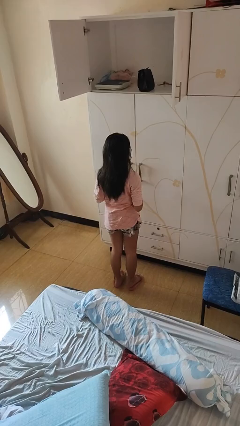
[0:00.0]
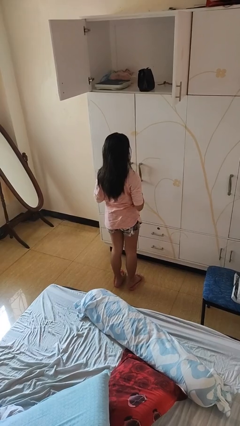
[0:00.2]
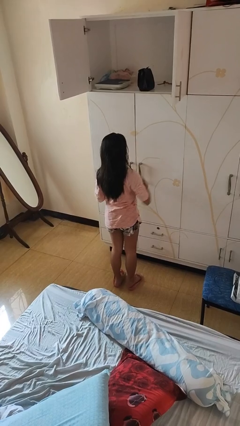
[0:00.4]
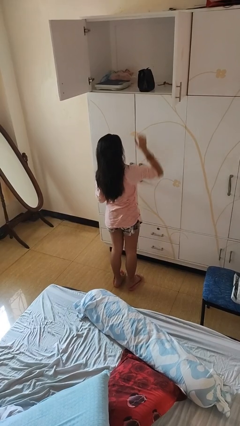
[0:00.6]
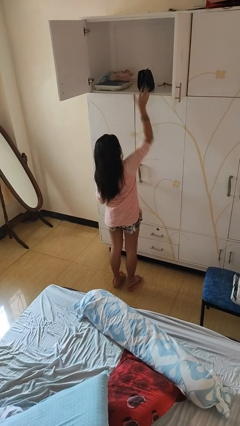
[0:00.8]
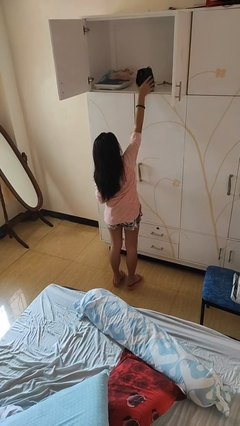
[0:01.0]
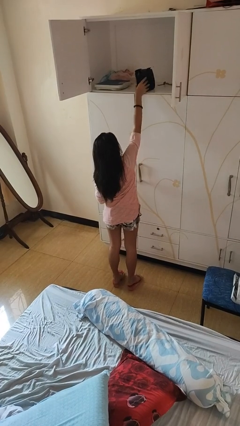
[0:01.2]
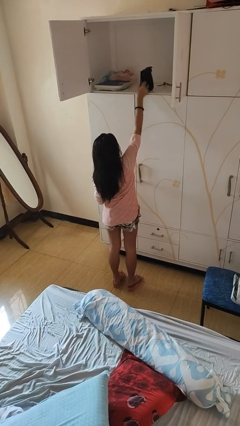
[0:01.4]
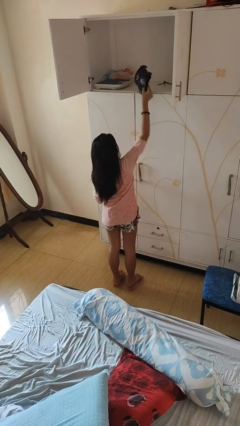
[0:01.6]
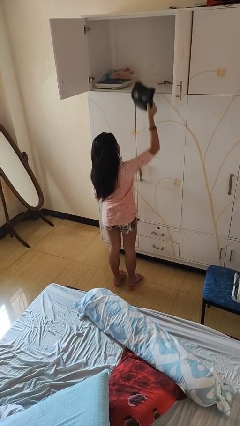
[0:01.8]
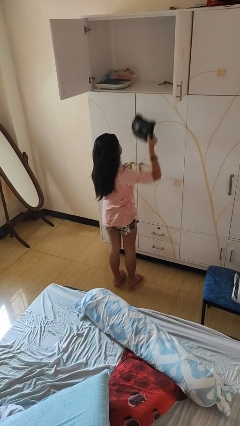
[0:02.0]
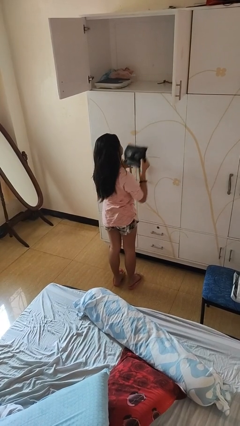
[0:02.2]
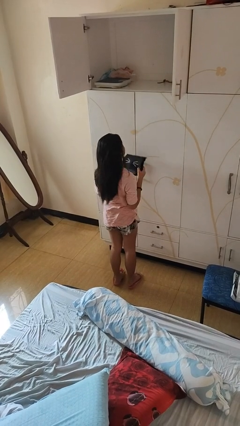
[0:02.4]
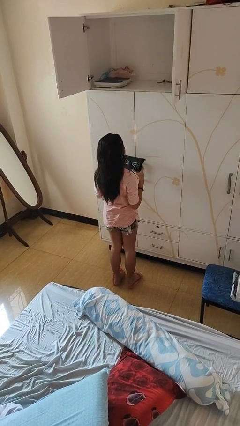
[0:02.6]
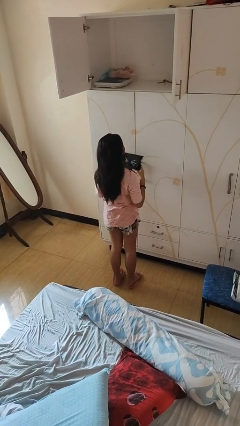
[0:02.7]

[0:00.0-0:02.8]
person picks up object from shelf

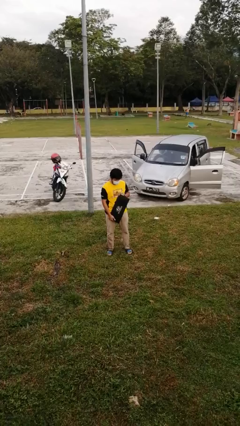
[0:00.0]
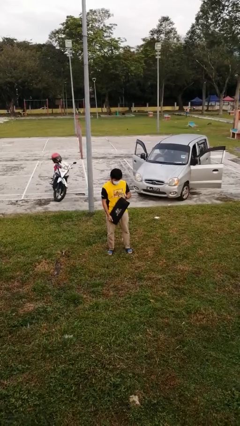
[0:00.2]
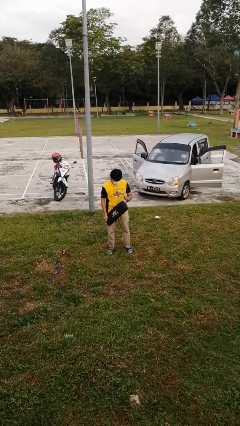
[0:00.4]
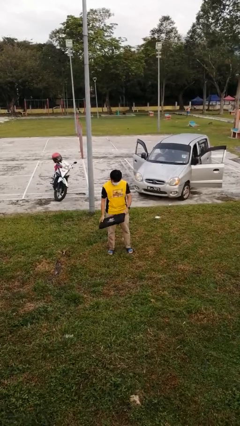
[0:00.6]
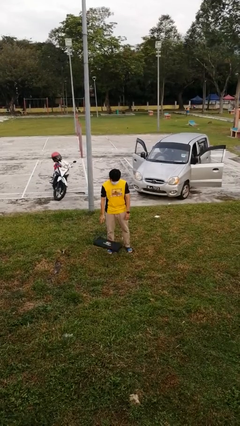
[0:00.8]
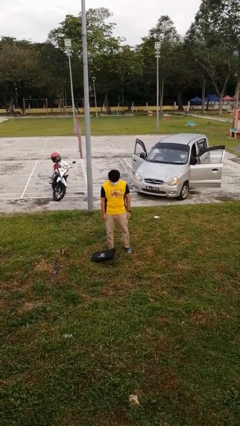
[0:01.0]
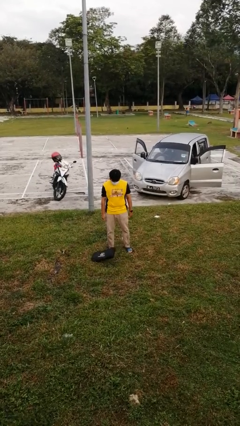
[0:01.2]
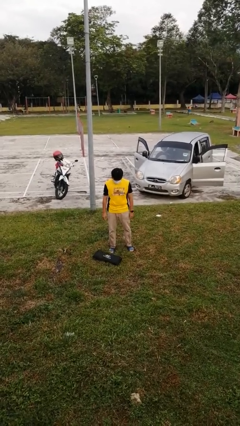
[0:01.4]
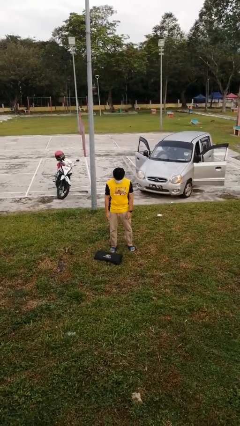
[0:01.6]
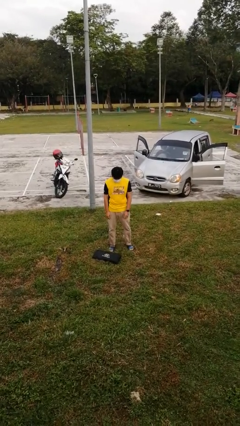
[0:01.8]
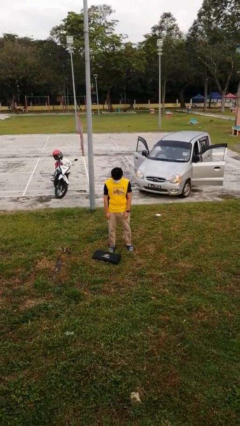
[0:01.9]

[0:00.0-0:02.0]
person drops object

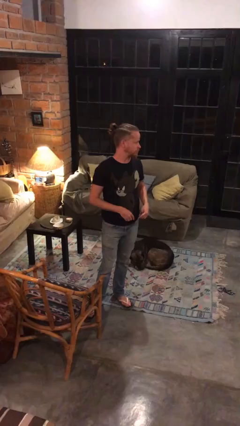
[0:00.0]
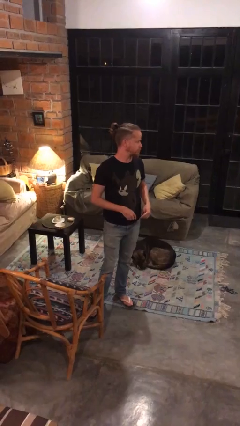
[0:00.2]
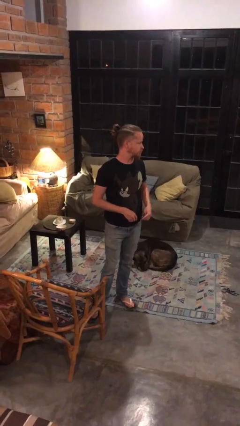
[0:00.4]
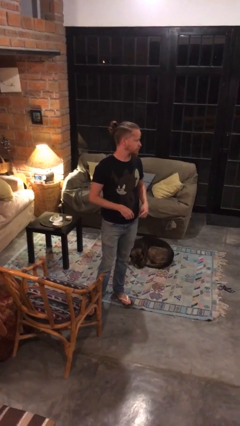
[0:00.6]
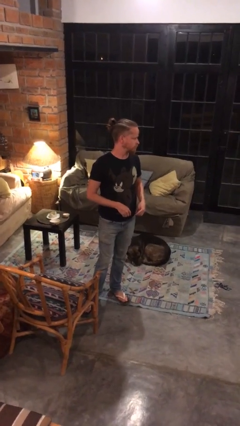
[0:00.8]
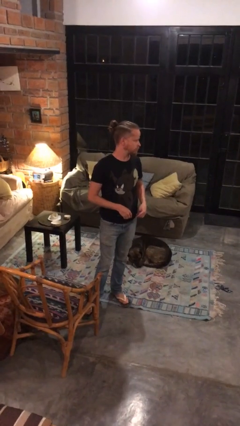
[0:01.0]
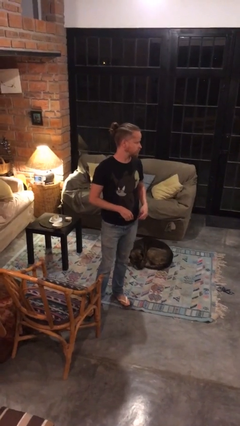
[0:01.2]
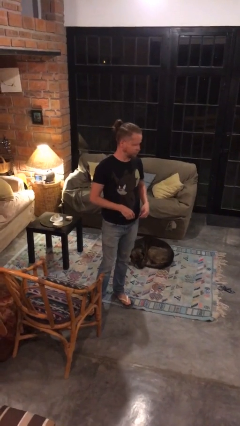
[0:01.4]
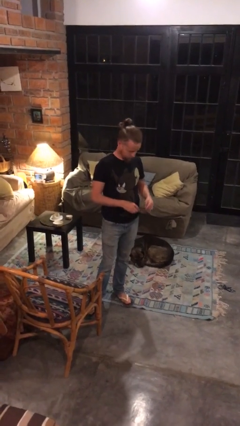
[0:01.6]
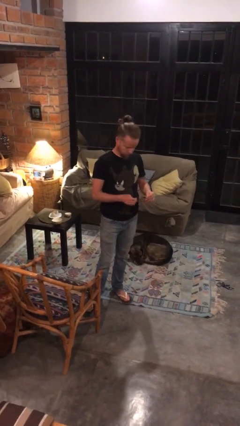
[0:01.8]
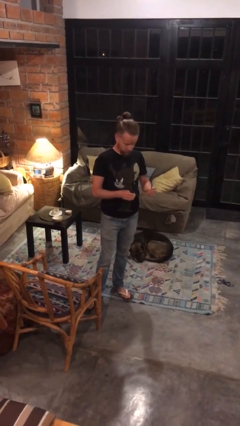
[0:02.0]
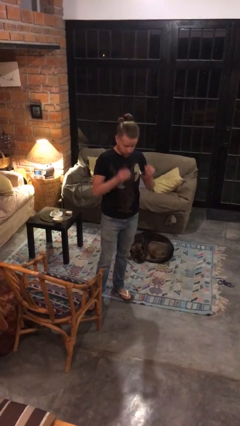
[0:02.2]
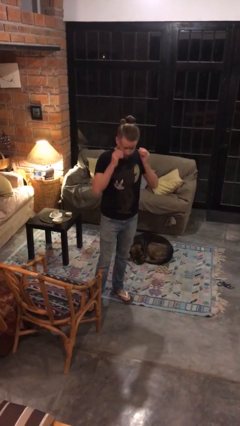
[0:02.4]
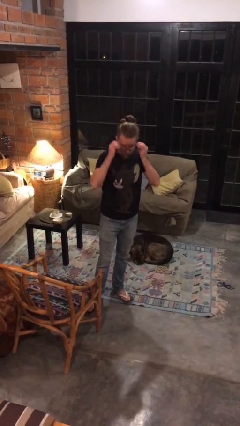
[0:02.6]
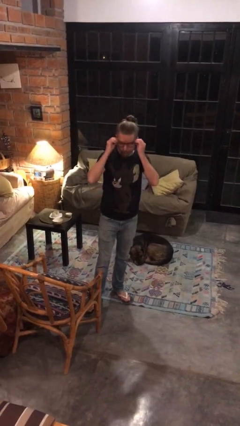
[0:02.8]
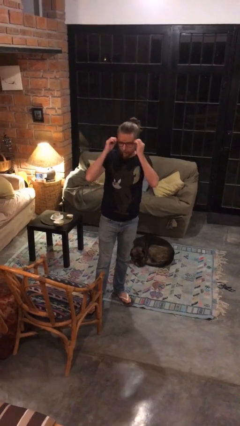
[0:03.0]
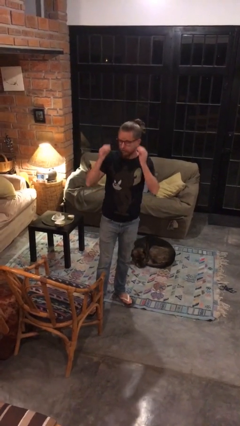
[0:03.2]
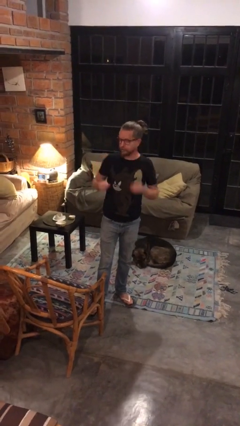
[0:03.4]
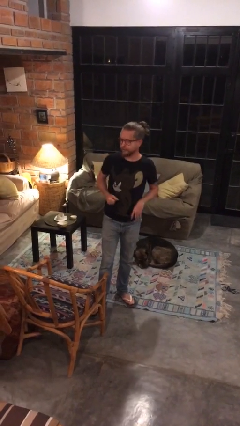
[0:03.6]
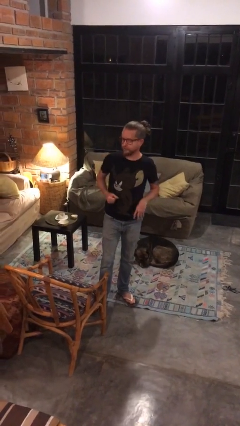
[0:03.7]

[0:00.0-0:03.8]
person puts on glasses

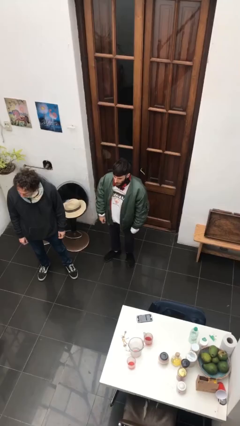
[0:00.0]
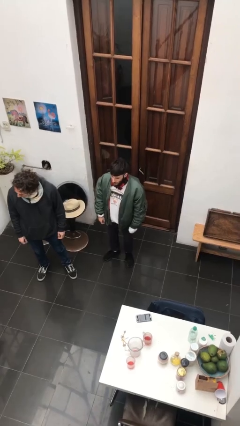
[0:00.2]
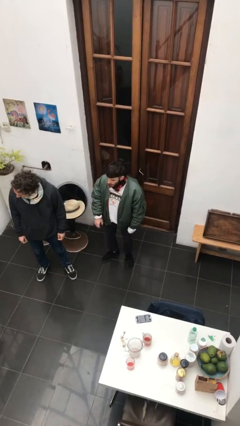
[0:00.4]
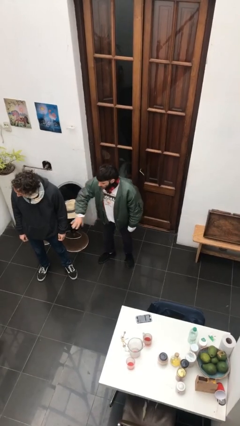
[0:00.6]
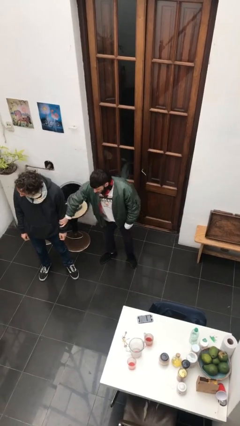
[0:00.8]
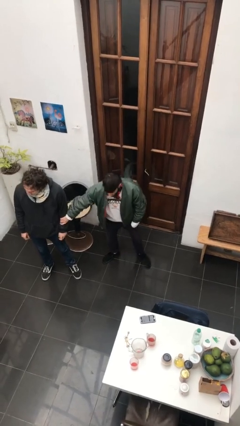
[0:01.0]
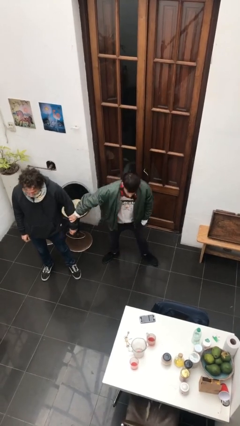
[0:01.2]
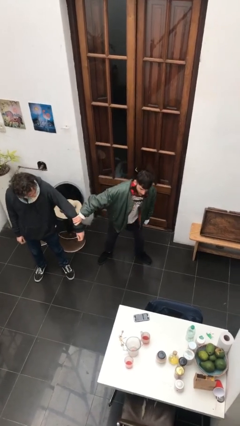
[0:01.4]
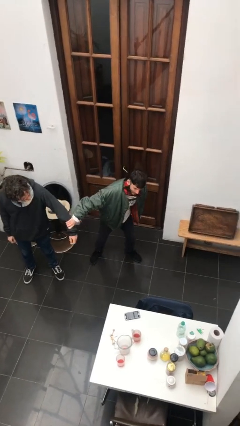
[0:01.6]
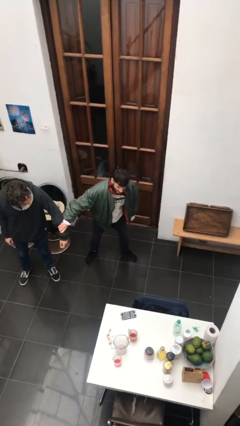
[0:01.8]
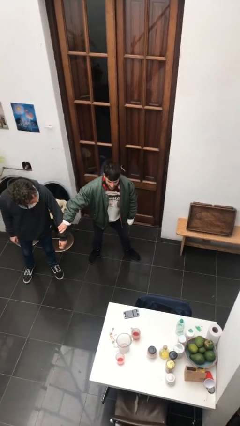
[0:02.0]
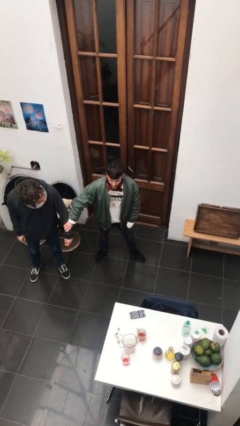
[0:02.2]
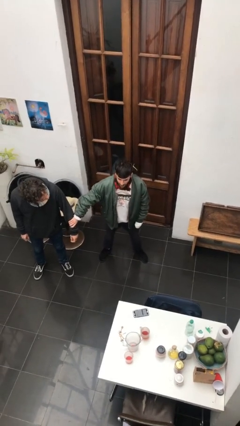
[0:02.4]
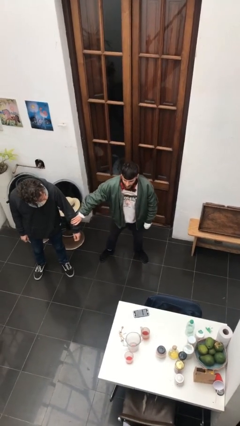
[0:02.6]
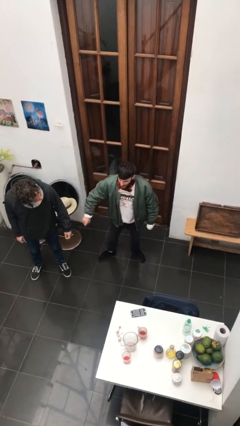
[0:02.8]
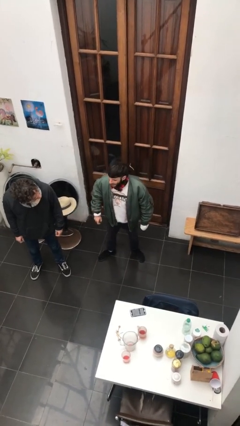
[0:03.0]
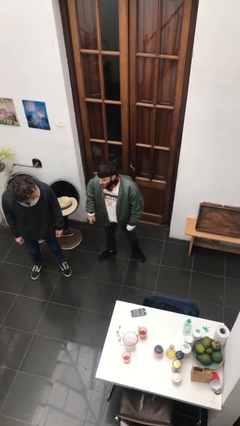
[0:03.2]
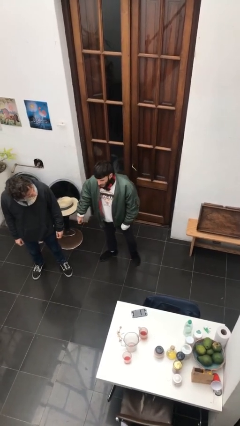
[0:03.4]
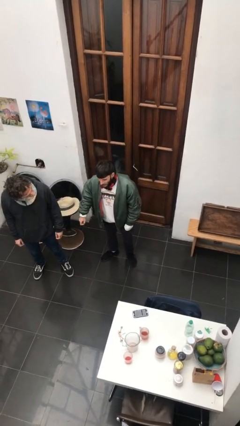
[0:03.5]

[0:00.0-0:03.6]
person grabs person by forearm

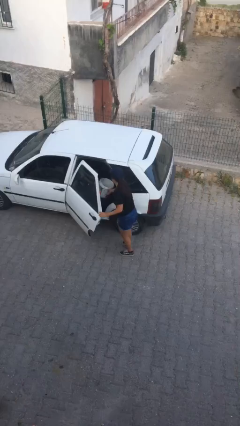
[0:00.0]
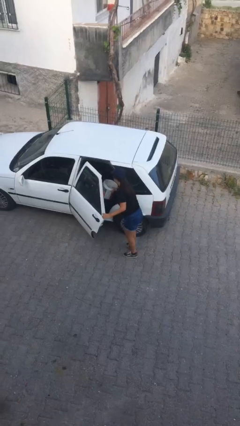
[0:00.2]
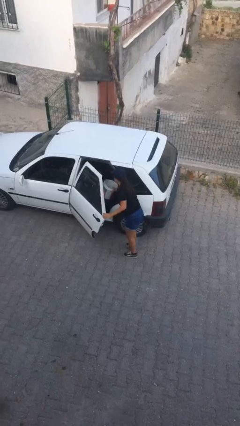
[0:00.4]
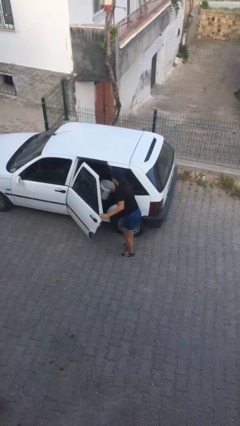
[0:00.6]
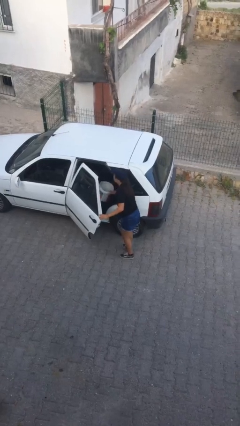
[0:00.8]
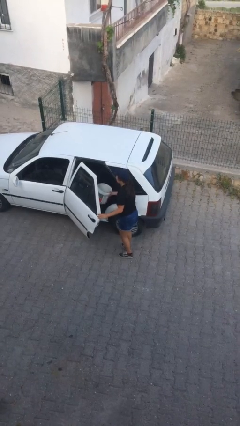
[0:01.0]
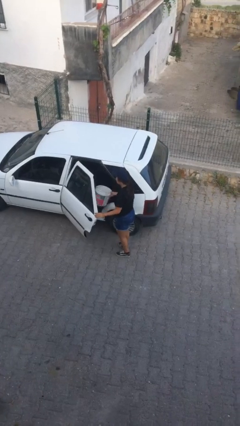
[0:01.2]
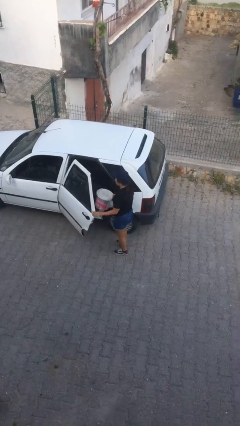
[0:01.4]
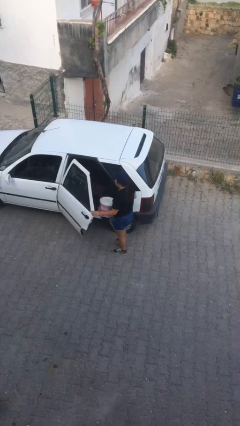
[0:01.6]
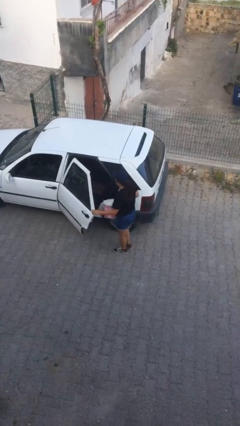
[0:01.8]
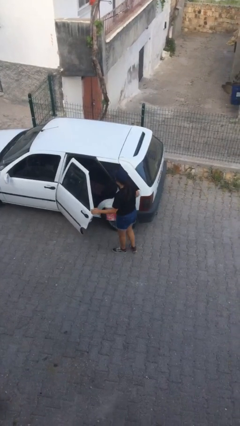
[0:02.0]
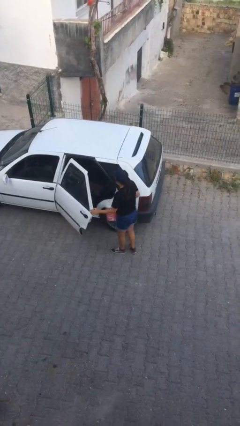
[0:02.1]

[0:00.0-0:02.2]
person unloads car

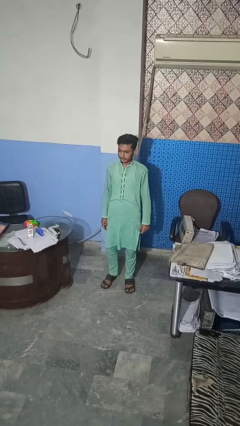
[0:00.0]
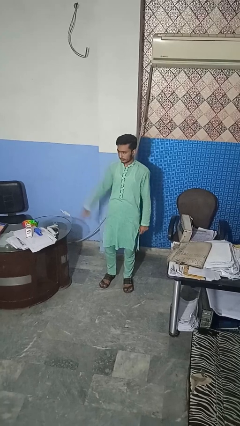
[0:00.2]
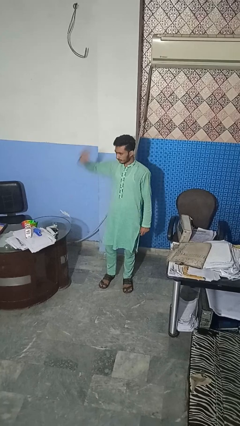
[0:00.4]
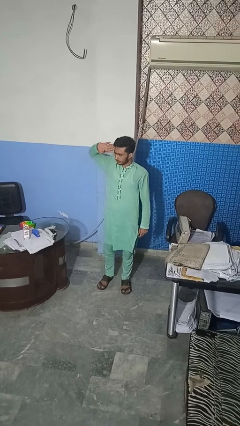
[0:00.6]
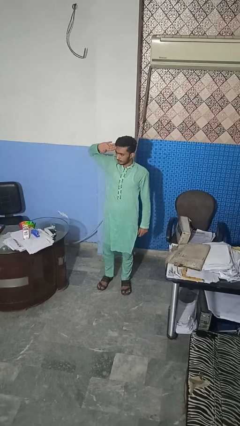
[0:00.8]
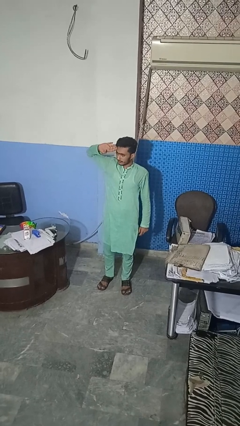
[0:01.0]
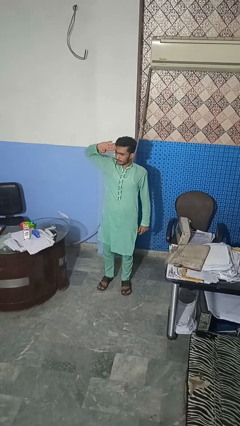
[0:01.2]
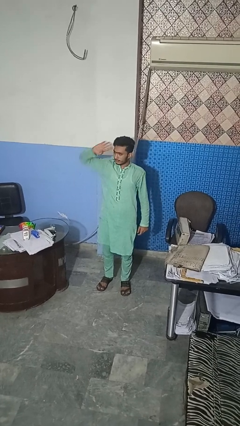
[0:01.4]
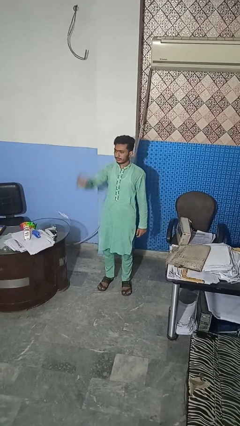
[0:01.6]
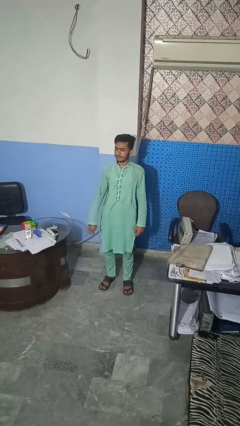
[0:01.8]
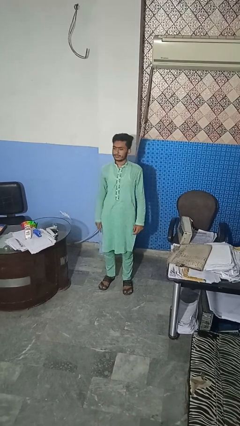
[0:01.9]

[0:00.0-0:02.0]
person salutes

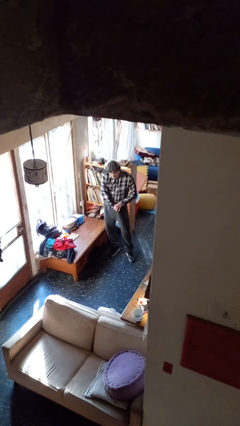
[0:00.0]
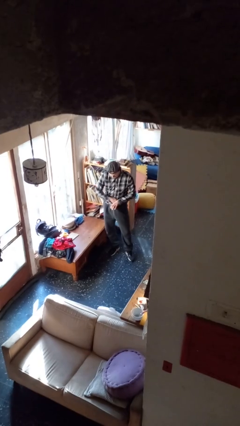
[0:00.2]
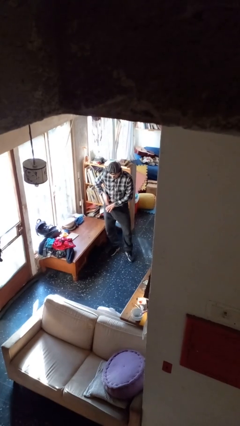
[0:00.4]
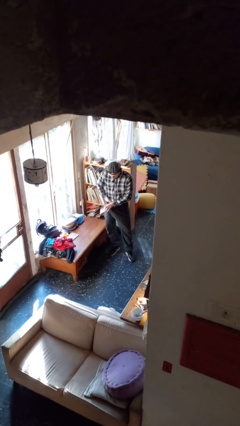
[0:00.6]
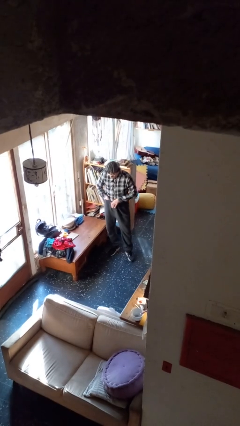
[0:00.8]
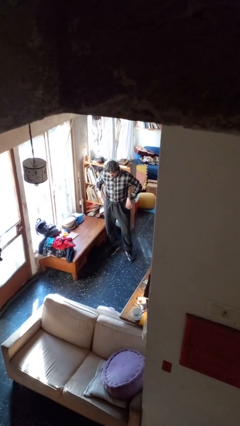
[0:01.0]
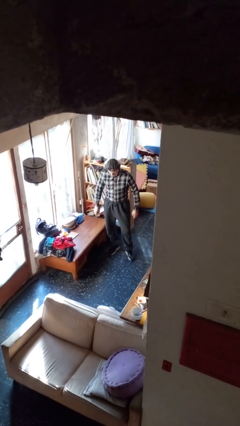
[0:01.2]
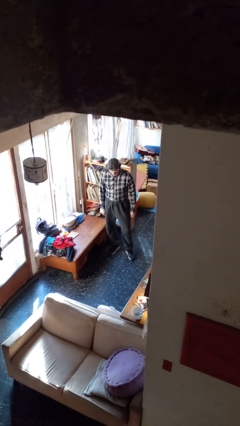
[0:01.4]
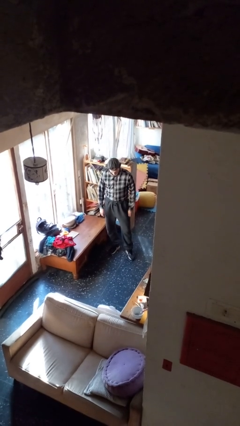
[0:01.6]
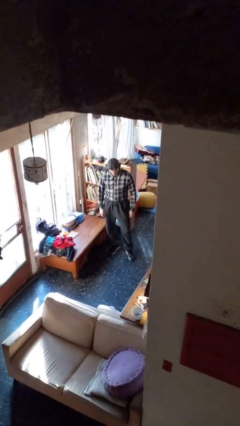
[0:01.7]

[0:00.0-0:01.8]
person tucks in shirt
